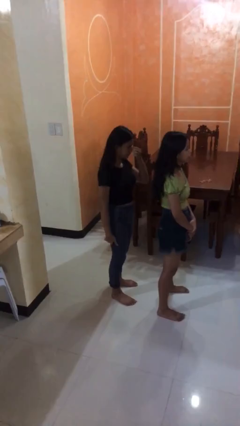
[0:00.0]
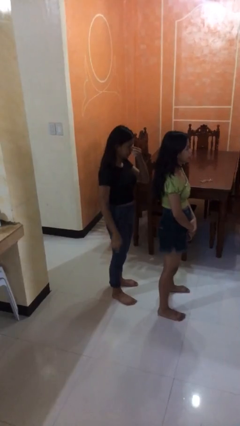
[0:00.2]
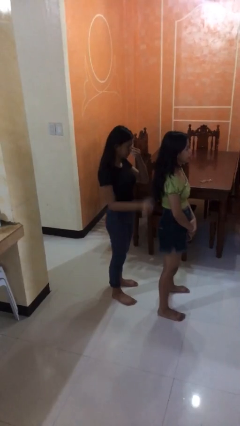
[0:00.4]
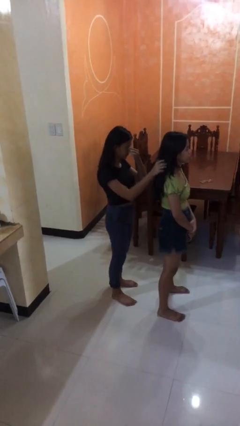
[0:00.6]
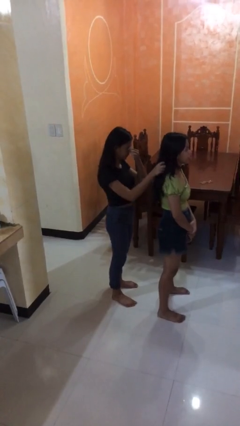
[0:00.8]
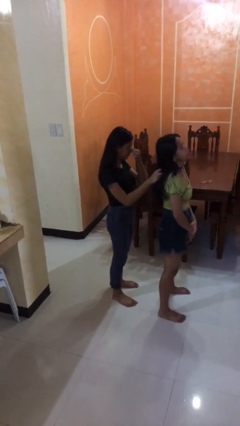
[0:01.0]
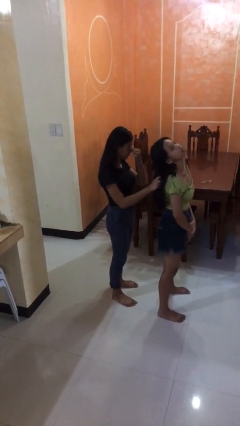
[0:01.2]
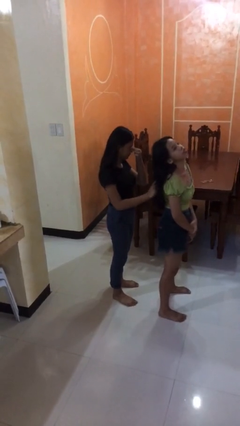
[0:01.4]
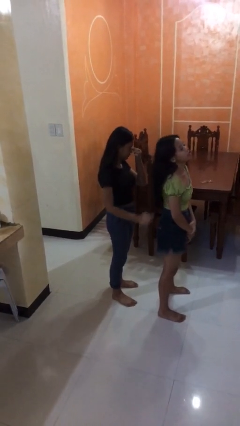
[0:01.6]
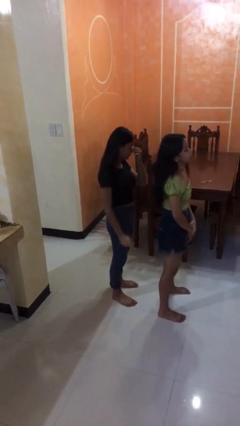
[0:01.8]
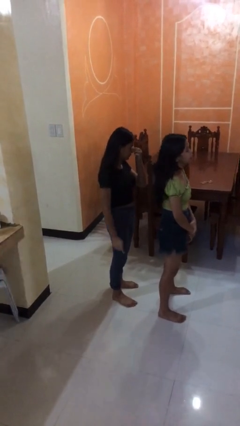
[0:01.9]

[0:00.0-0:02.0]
person grabs person by hair

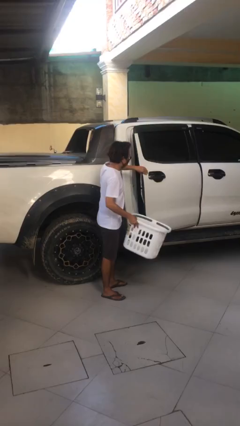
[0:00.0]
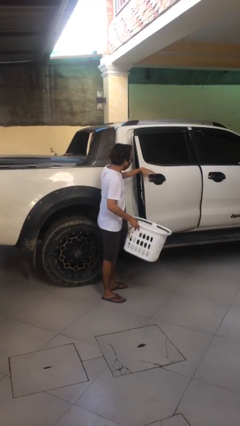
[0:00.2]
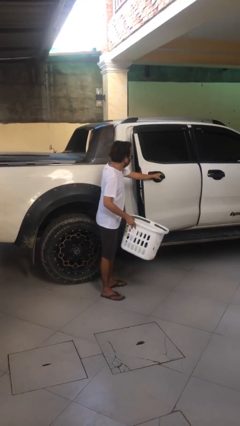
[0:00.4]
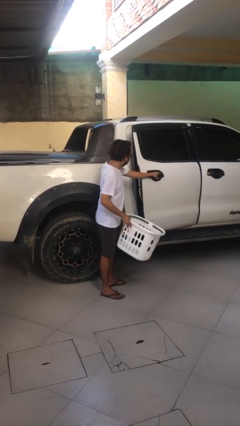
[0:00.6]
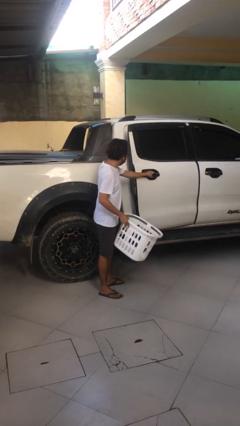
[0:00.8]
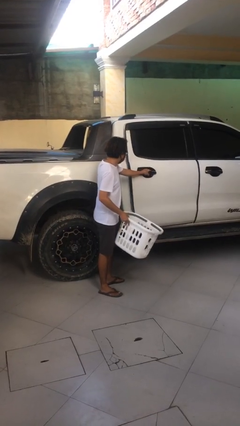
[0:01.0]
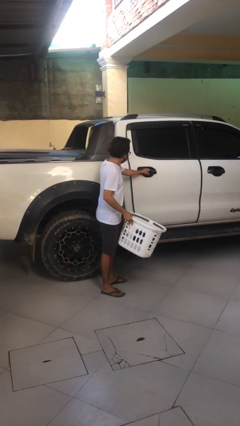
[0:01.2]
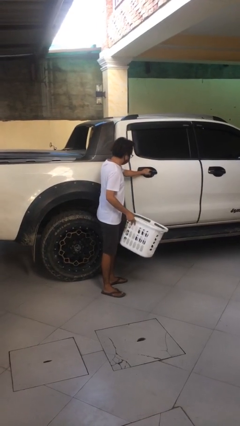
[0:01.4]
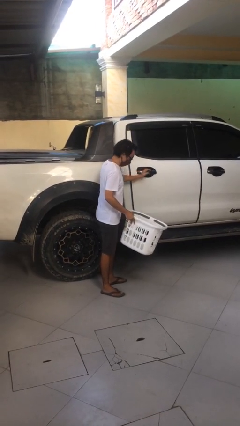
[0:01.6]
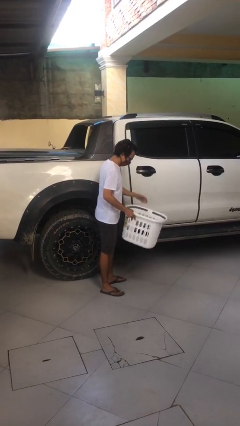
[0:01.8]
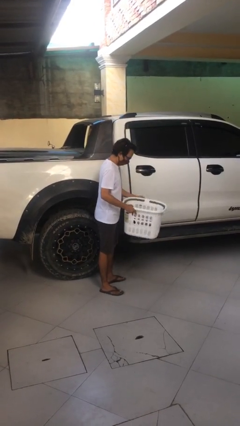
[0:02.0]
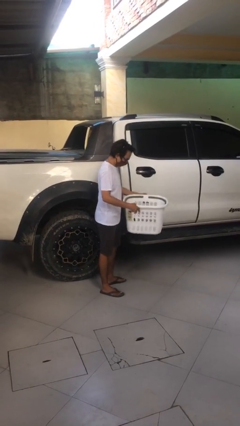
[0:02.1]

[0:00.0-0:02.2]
person closes car door

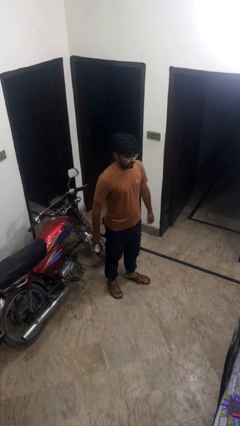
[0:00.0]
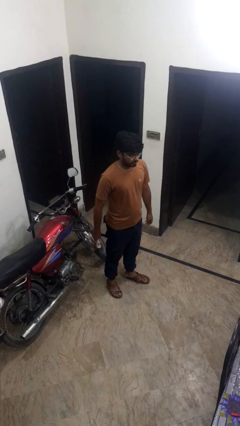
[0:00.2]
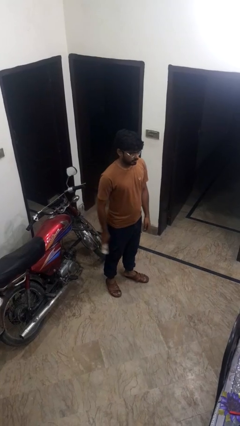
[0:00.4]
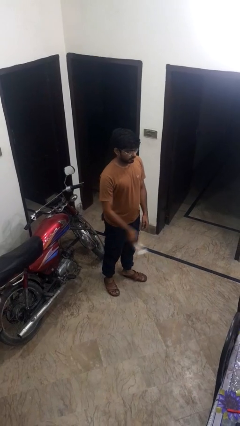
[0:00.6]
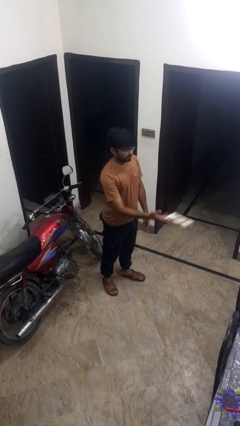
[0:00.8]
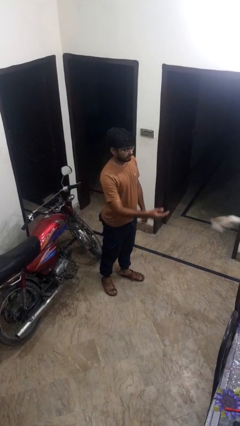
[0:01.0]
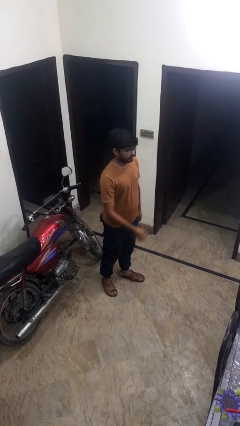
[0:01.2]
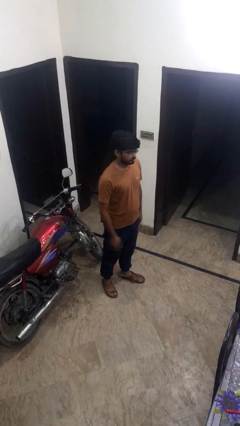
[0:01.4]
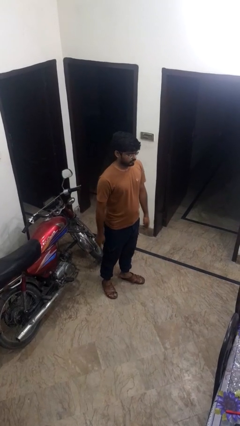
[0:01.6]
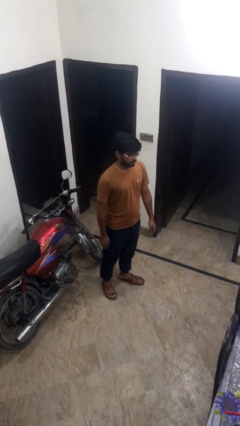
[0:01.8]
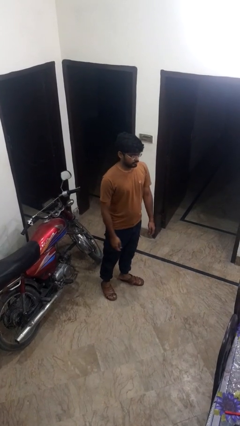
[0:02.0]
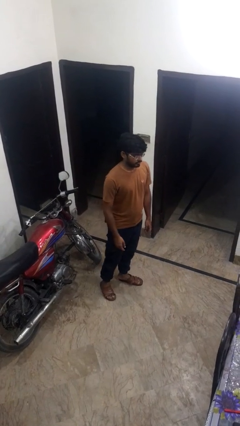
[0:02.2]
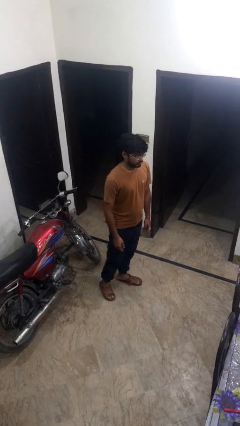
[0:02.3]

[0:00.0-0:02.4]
person throws object on table

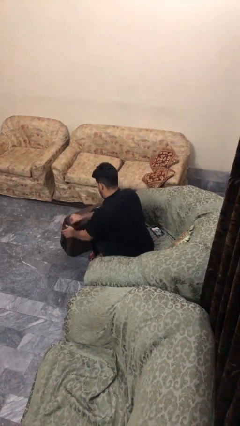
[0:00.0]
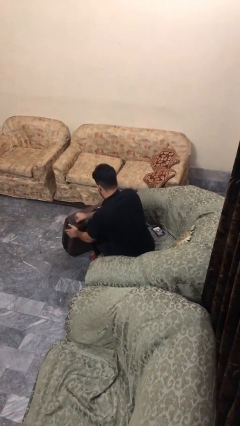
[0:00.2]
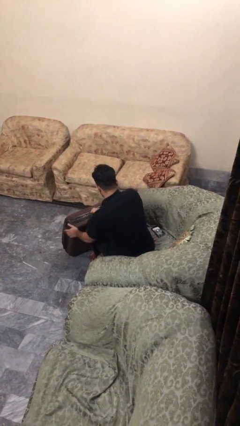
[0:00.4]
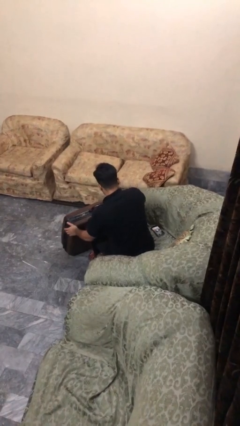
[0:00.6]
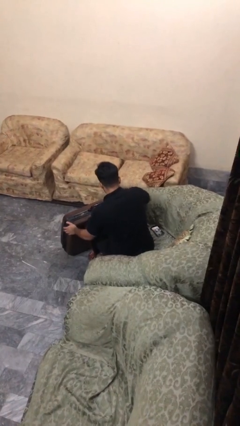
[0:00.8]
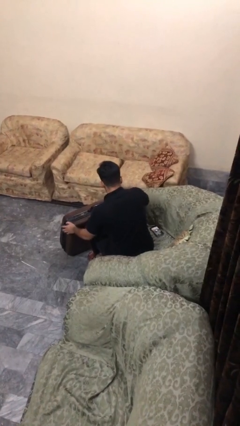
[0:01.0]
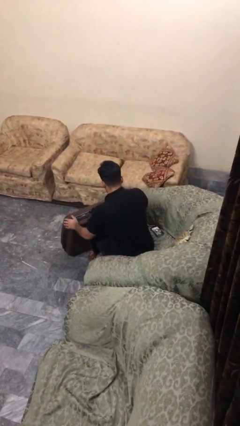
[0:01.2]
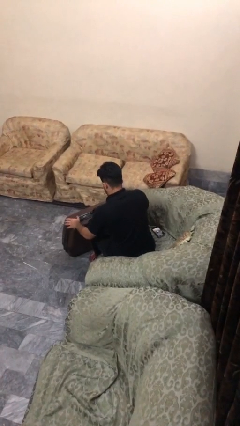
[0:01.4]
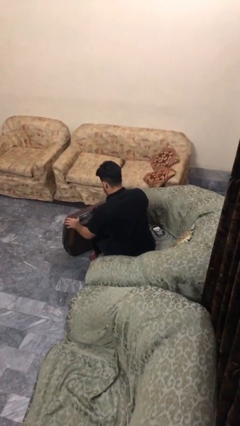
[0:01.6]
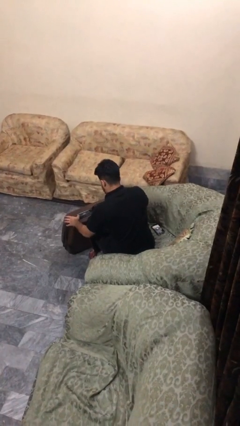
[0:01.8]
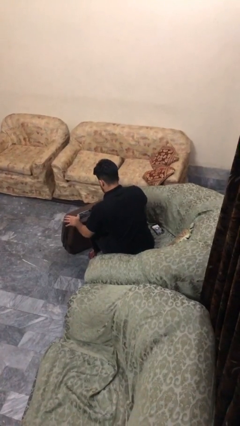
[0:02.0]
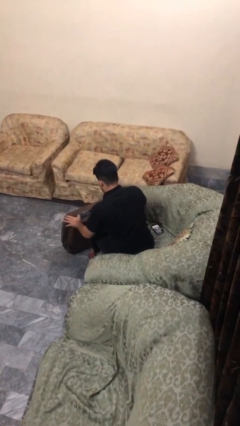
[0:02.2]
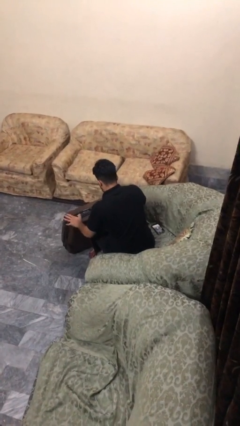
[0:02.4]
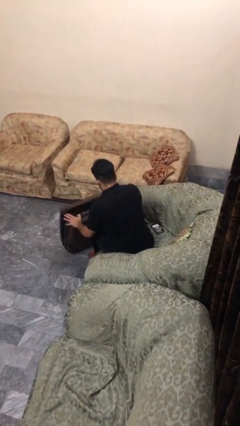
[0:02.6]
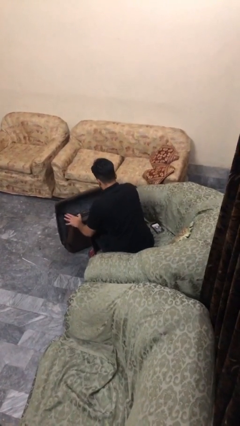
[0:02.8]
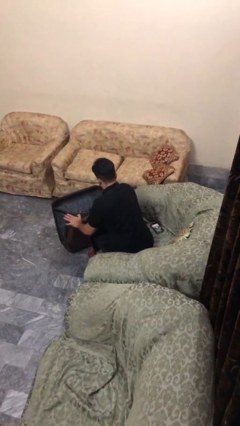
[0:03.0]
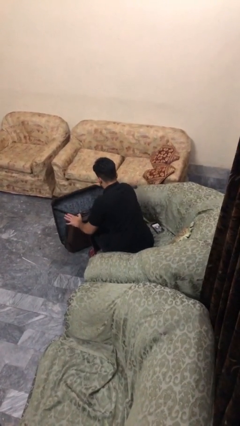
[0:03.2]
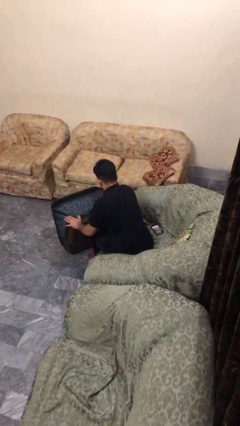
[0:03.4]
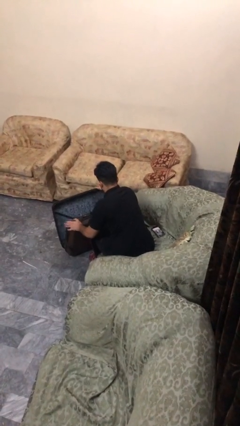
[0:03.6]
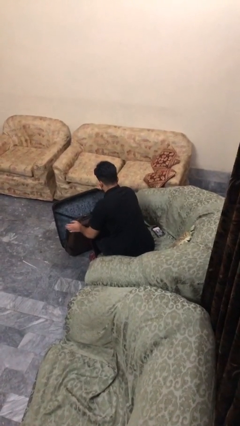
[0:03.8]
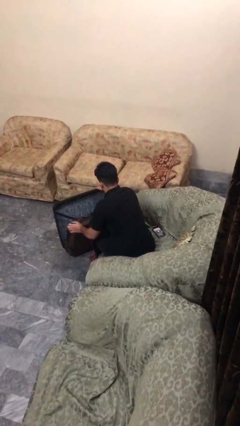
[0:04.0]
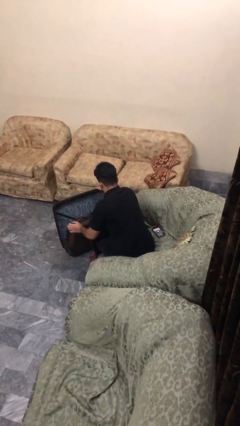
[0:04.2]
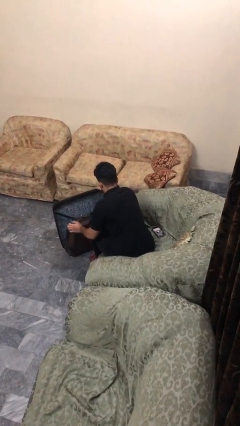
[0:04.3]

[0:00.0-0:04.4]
person opens suitcase

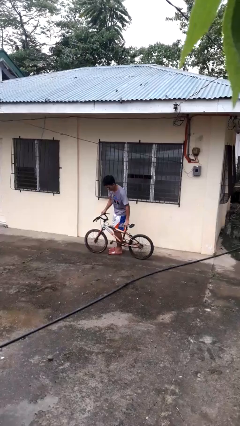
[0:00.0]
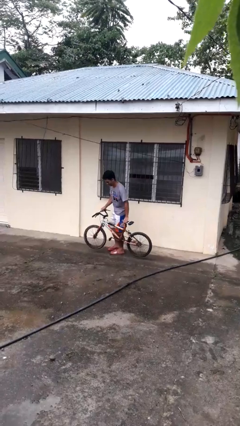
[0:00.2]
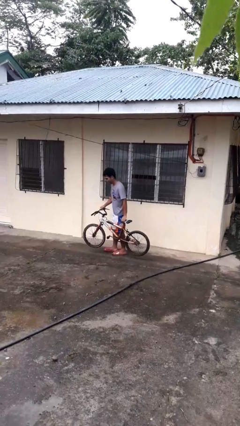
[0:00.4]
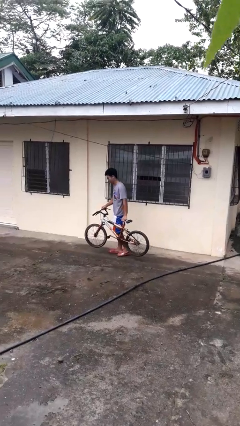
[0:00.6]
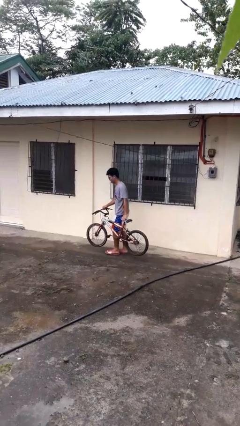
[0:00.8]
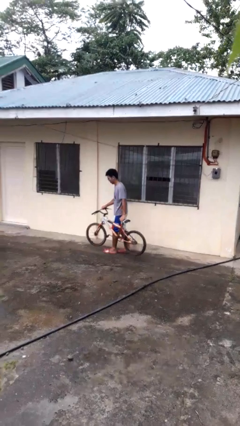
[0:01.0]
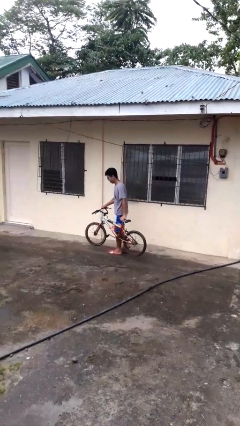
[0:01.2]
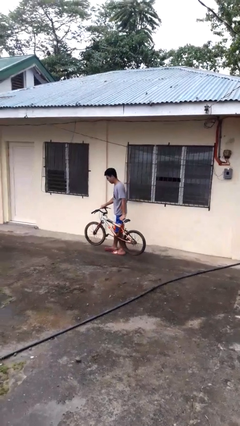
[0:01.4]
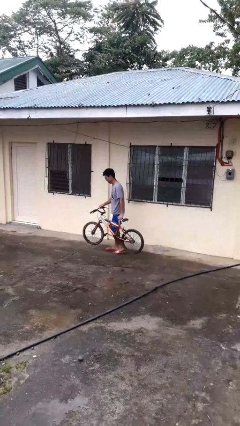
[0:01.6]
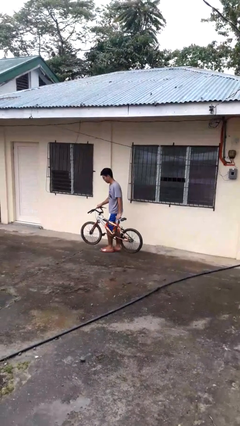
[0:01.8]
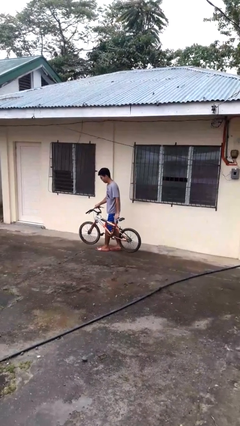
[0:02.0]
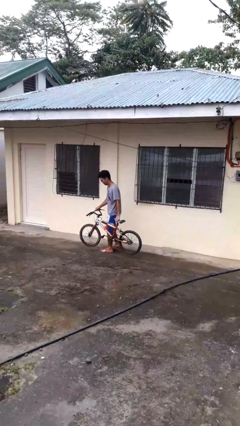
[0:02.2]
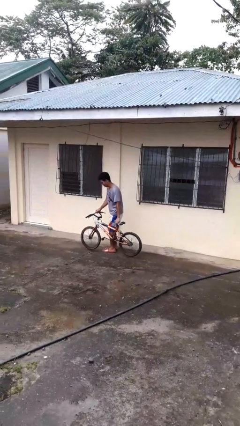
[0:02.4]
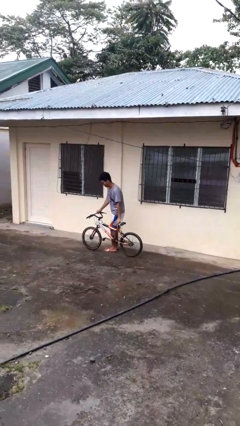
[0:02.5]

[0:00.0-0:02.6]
person carries bicycle

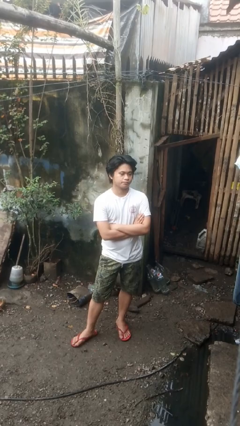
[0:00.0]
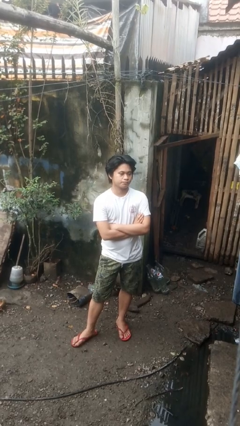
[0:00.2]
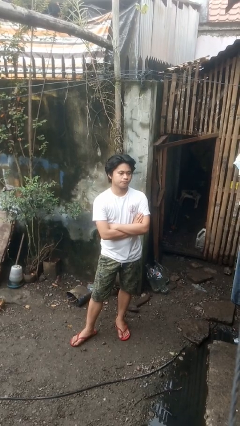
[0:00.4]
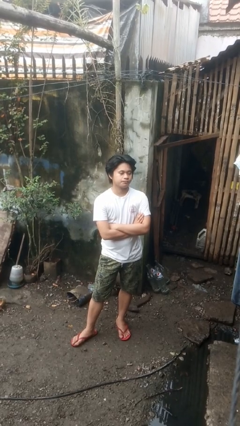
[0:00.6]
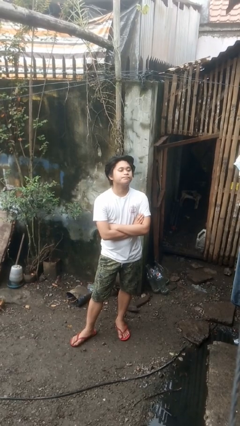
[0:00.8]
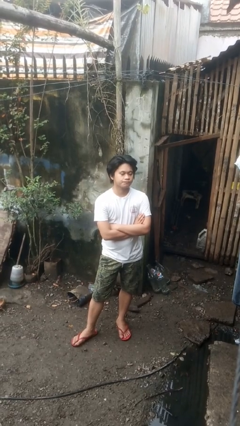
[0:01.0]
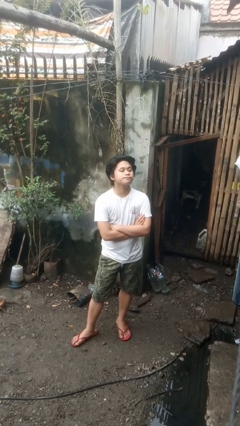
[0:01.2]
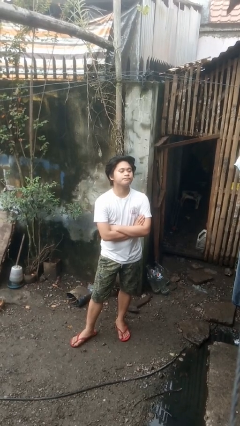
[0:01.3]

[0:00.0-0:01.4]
person nods head

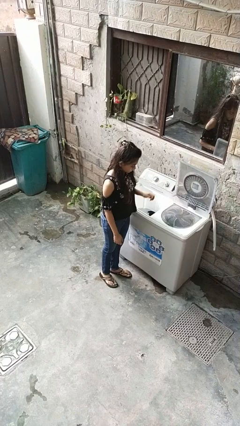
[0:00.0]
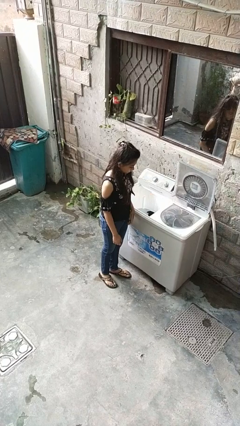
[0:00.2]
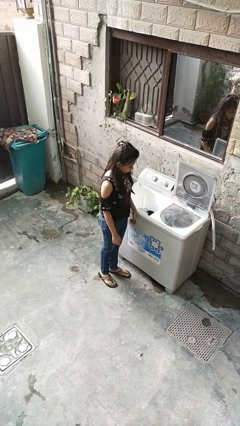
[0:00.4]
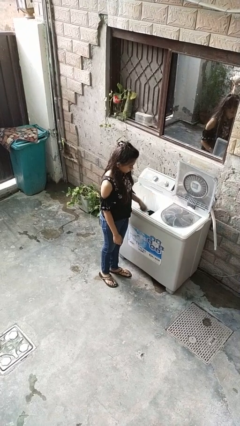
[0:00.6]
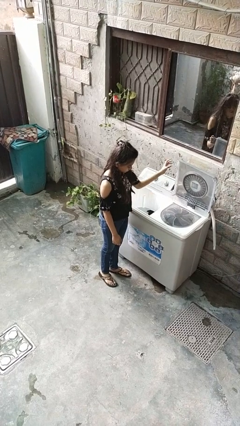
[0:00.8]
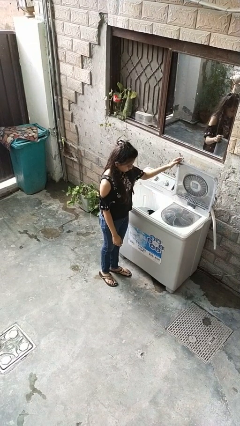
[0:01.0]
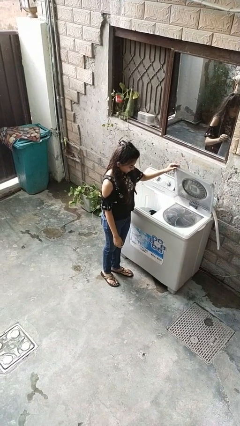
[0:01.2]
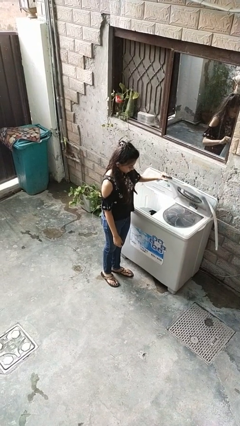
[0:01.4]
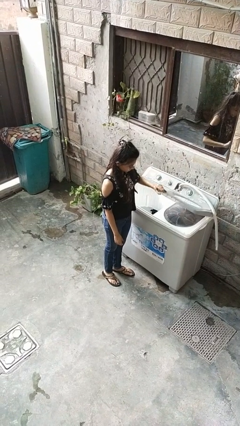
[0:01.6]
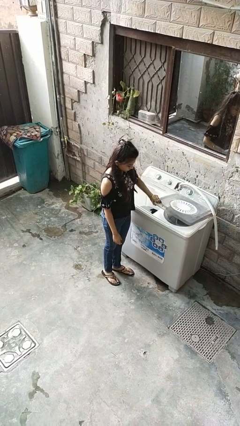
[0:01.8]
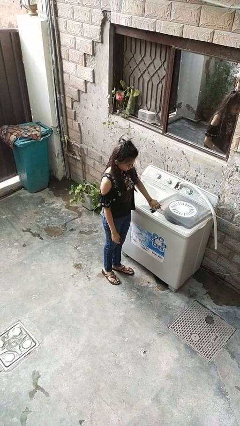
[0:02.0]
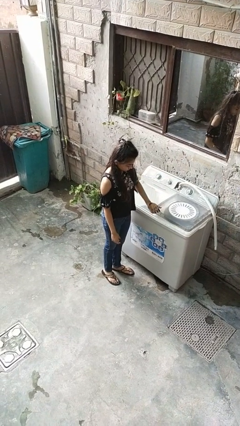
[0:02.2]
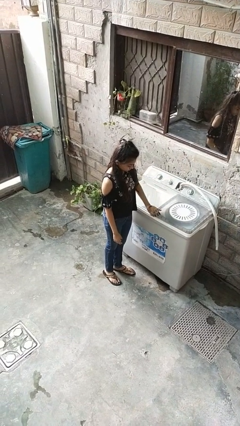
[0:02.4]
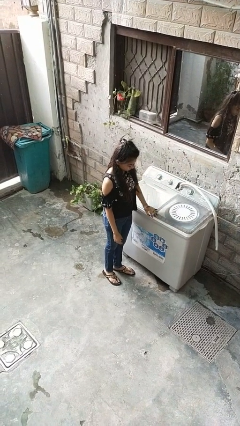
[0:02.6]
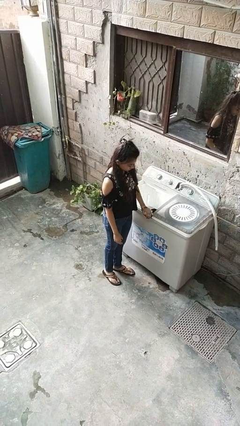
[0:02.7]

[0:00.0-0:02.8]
person closes clothes washer
